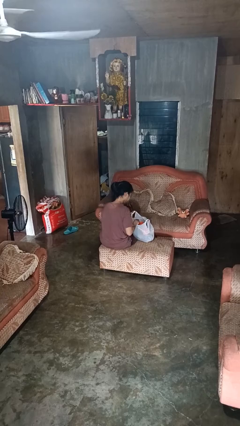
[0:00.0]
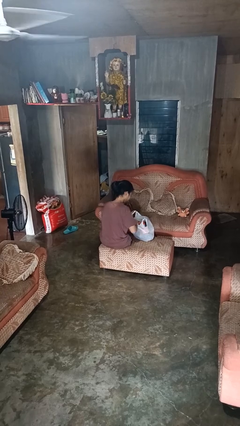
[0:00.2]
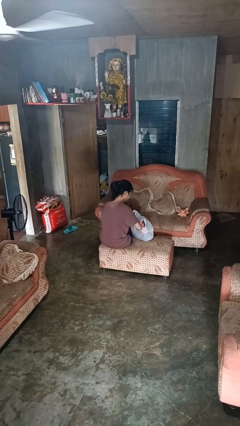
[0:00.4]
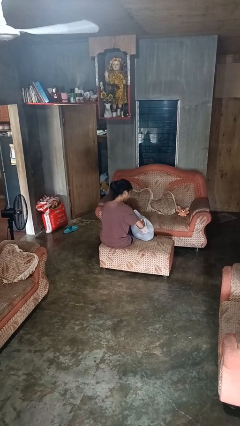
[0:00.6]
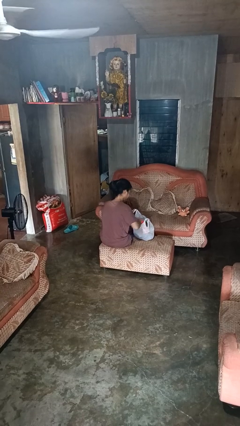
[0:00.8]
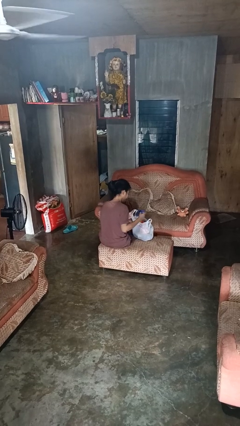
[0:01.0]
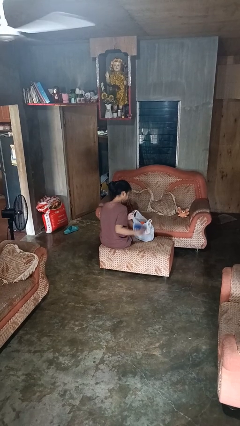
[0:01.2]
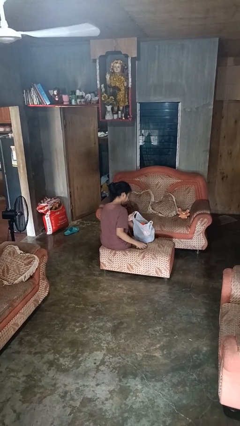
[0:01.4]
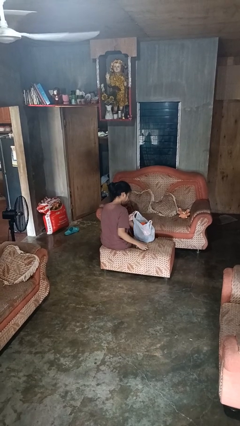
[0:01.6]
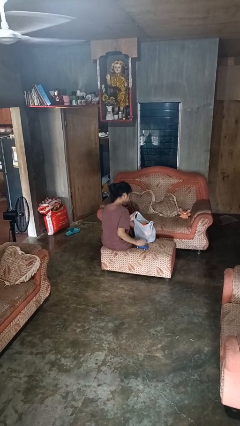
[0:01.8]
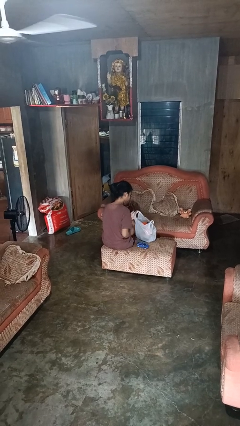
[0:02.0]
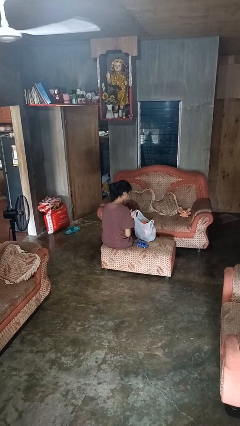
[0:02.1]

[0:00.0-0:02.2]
person takes object from bag

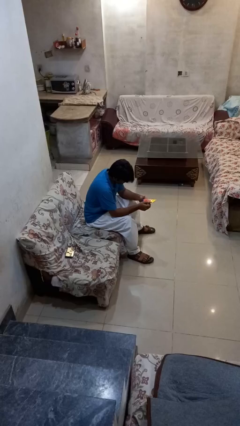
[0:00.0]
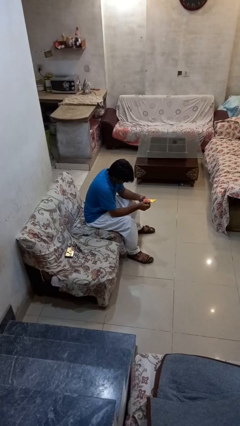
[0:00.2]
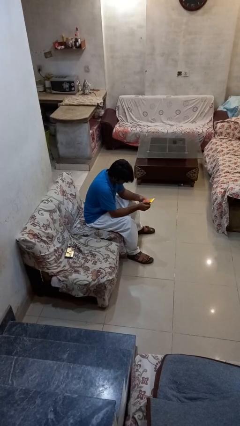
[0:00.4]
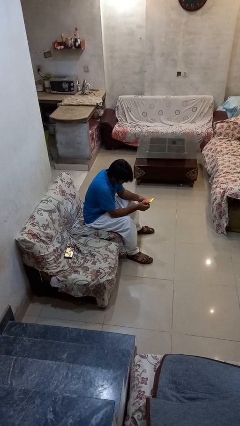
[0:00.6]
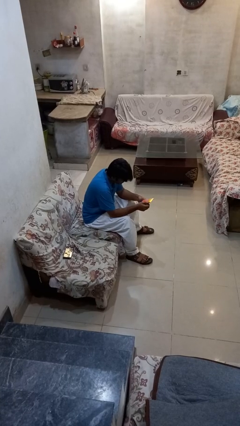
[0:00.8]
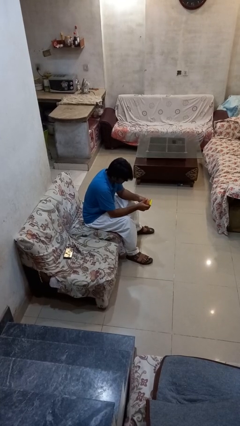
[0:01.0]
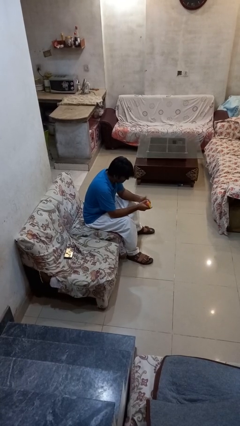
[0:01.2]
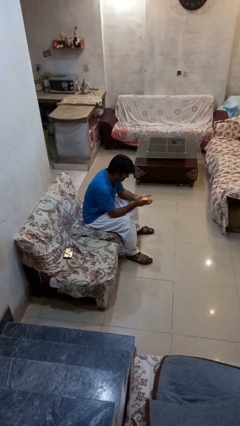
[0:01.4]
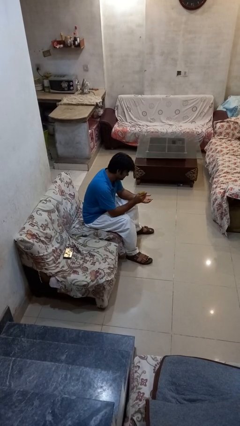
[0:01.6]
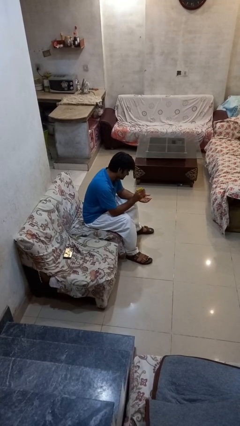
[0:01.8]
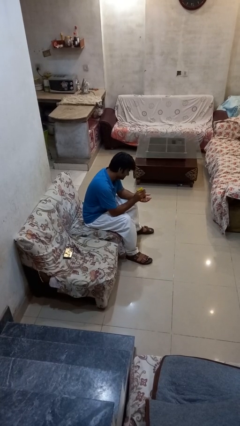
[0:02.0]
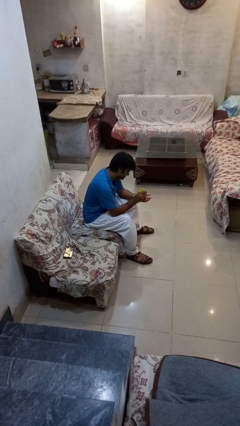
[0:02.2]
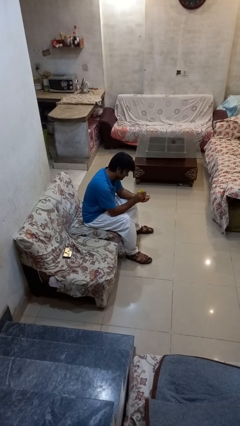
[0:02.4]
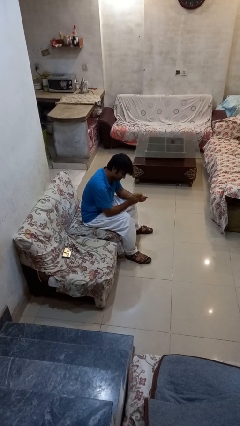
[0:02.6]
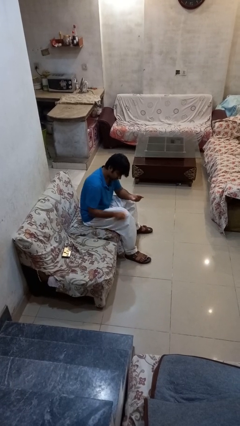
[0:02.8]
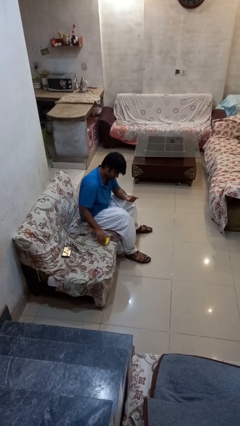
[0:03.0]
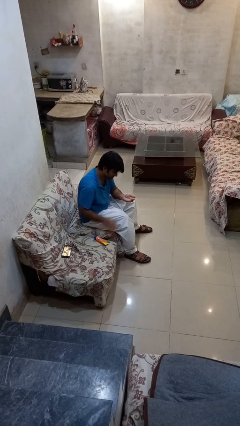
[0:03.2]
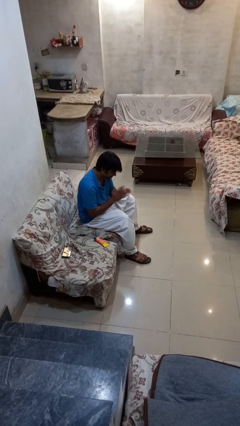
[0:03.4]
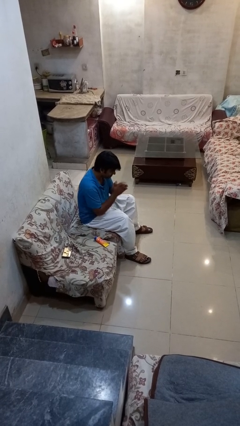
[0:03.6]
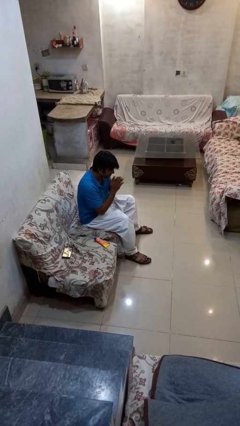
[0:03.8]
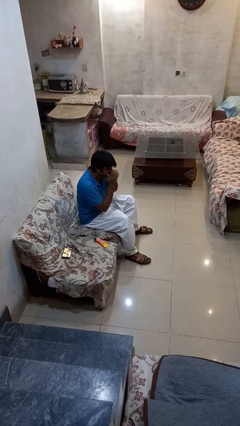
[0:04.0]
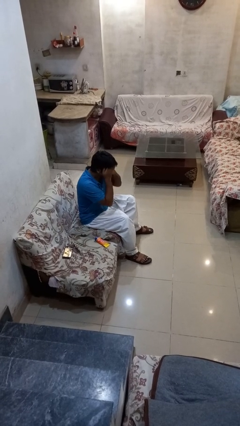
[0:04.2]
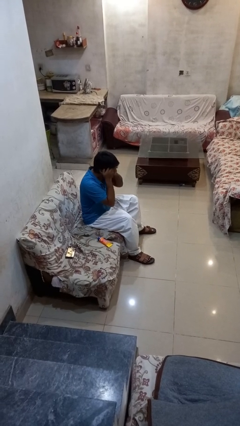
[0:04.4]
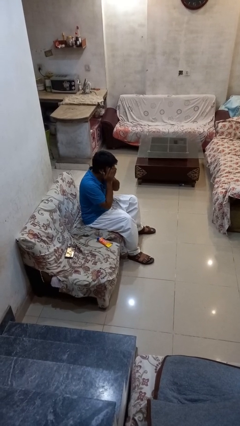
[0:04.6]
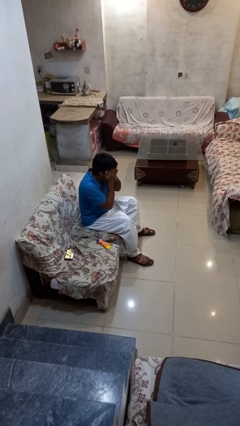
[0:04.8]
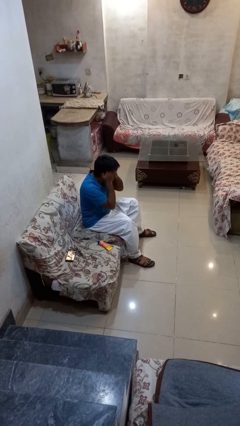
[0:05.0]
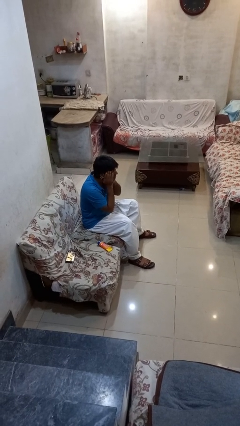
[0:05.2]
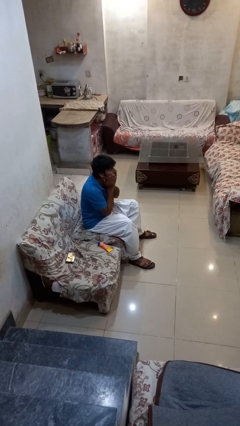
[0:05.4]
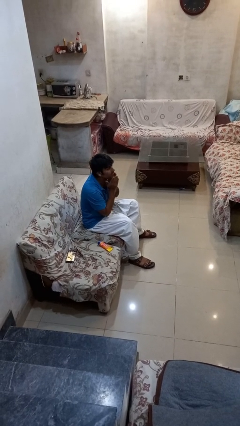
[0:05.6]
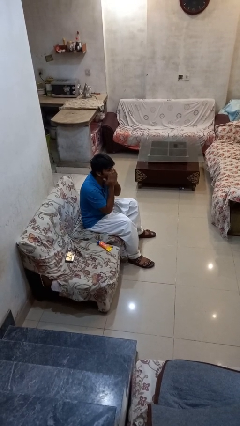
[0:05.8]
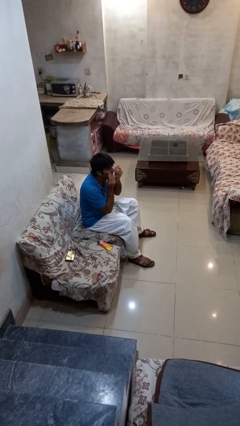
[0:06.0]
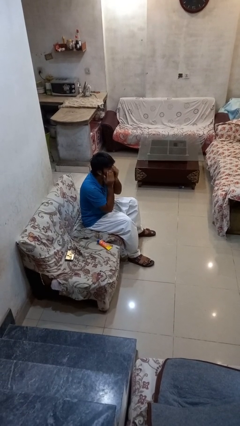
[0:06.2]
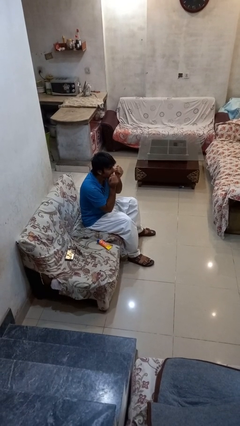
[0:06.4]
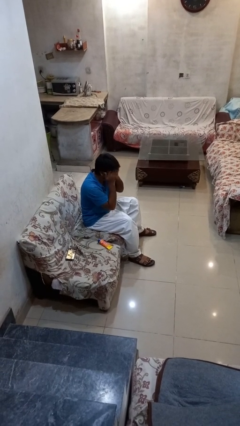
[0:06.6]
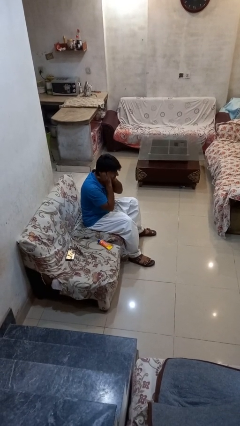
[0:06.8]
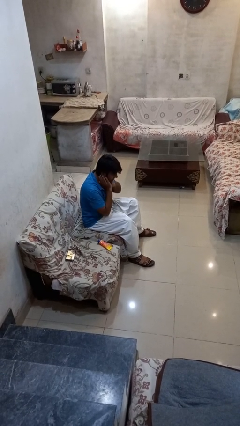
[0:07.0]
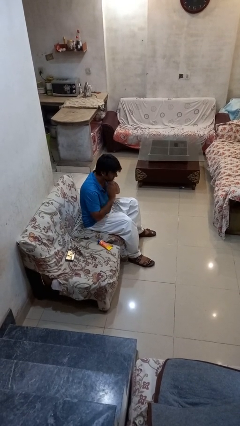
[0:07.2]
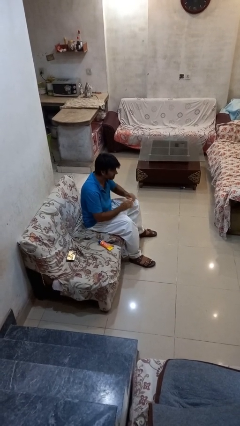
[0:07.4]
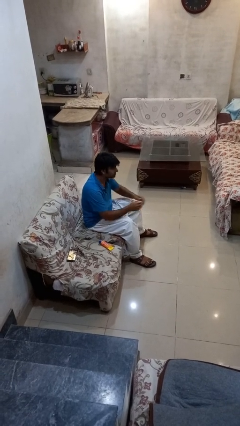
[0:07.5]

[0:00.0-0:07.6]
person applies facial moisturizer

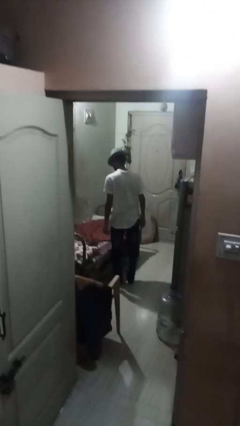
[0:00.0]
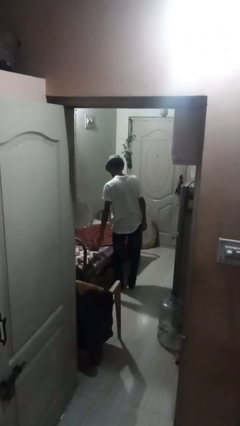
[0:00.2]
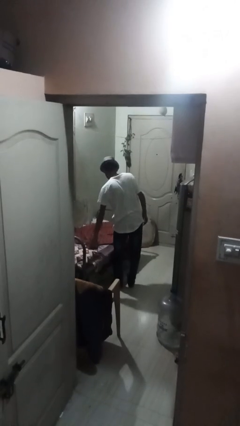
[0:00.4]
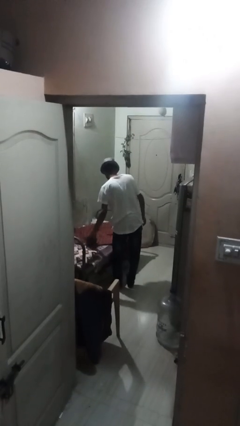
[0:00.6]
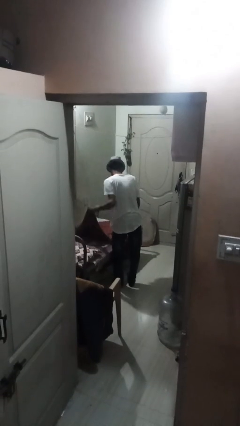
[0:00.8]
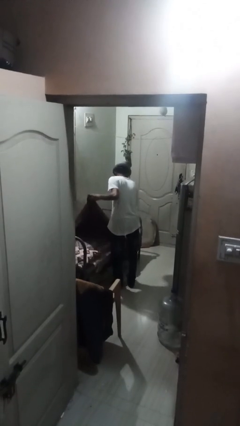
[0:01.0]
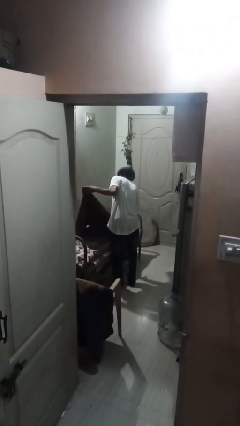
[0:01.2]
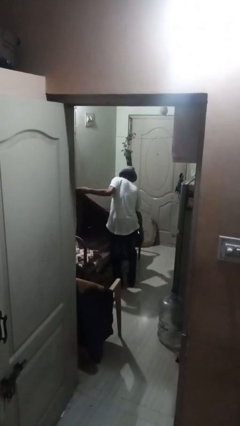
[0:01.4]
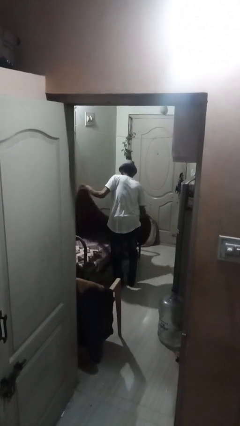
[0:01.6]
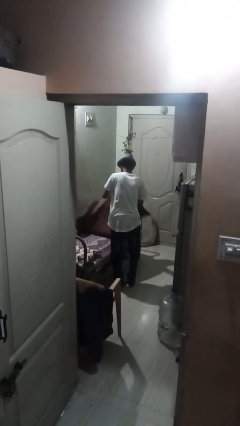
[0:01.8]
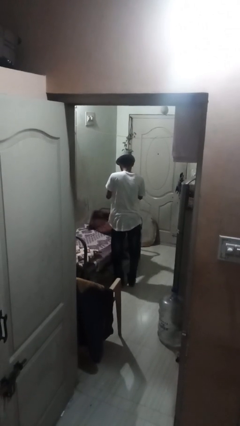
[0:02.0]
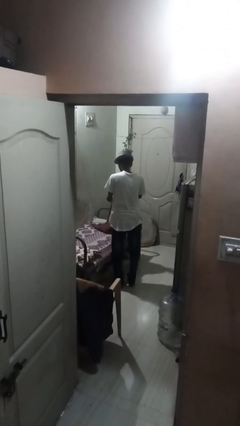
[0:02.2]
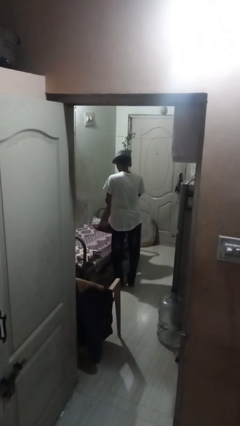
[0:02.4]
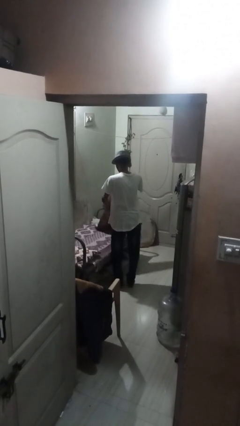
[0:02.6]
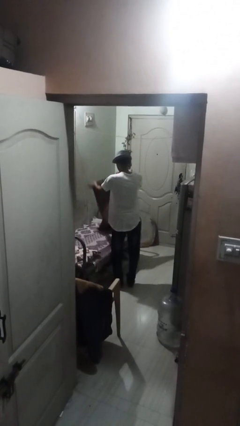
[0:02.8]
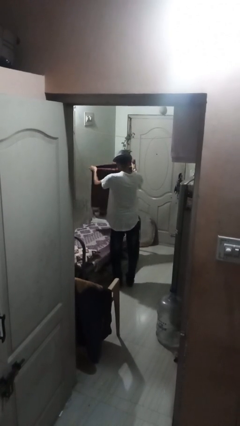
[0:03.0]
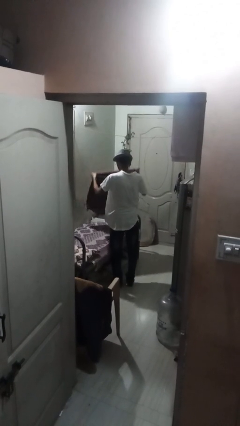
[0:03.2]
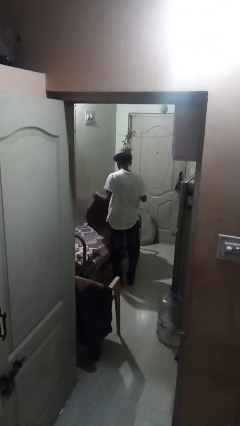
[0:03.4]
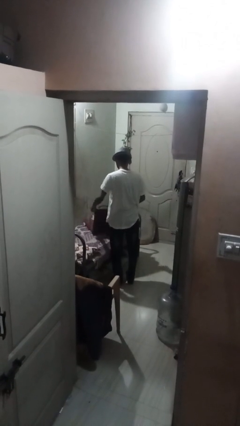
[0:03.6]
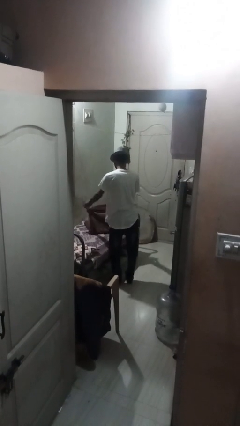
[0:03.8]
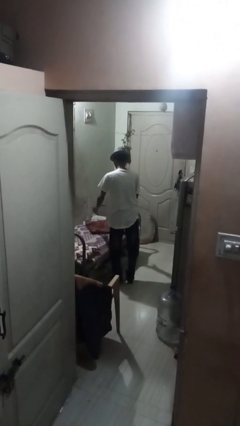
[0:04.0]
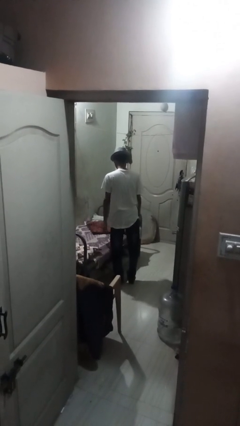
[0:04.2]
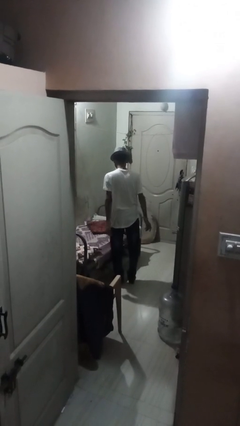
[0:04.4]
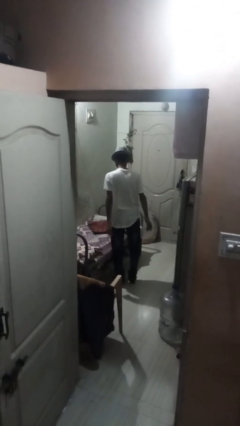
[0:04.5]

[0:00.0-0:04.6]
person folds blanket

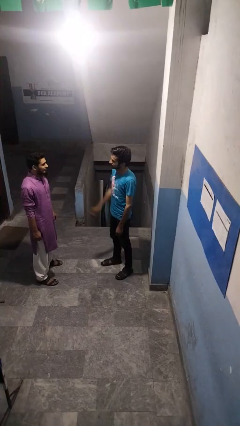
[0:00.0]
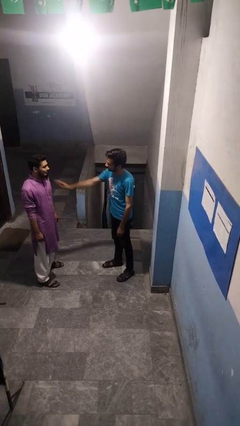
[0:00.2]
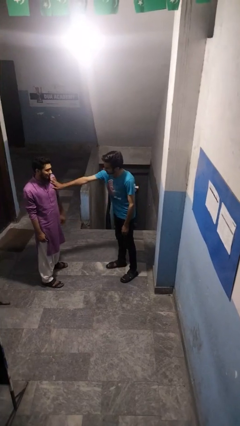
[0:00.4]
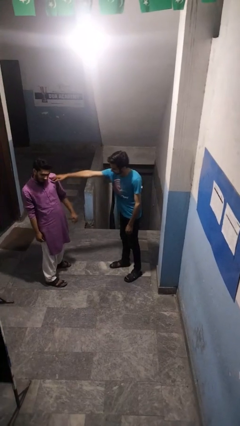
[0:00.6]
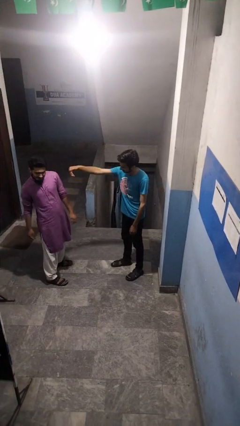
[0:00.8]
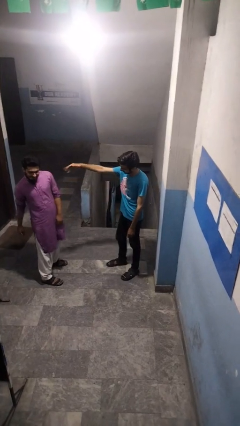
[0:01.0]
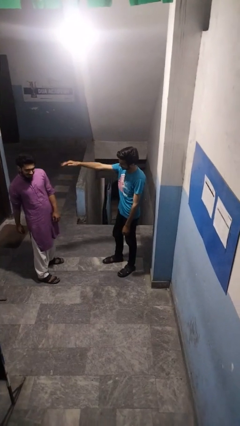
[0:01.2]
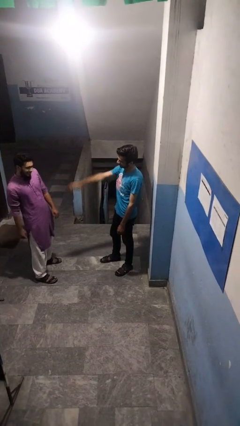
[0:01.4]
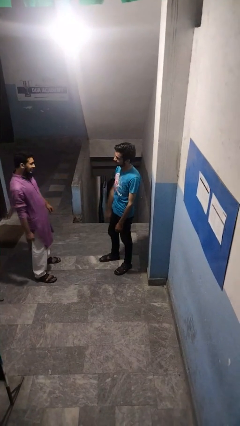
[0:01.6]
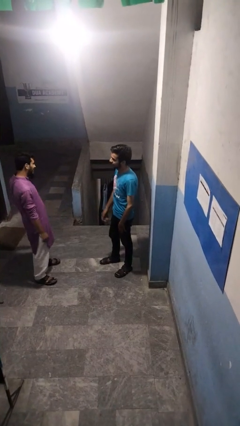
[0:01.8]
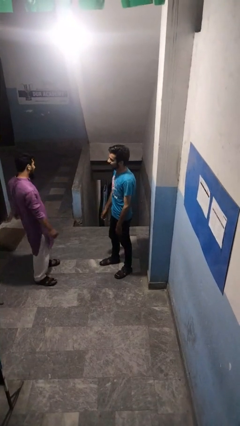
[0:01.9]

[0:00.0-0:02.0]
person shoves person

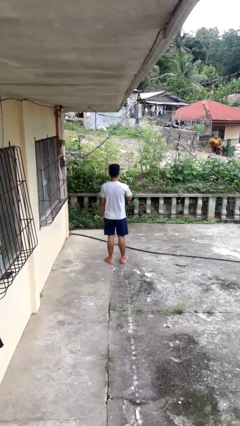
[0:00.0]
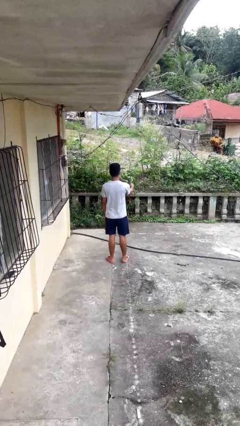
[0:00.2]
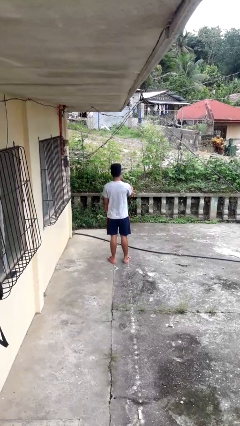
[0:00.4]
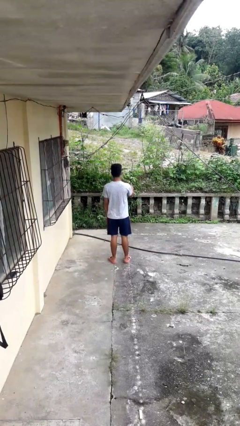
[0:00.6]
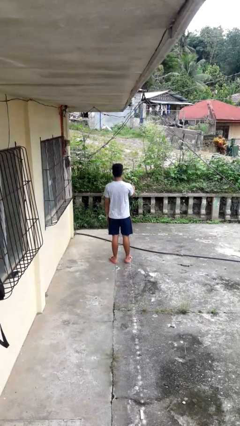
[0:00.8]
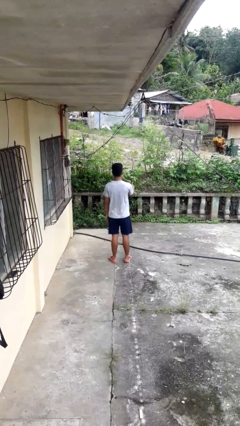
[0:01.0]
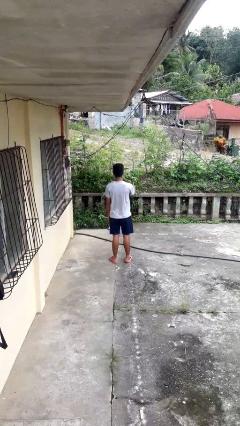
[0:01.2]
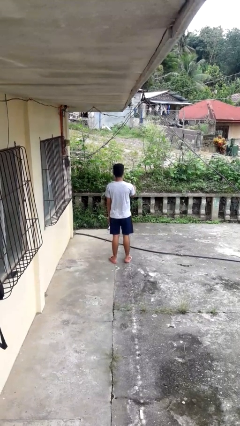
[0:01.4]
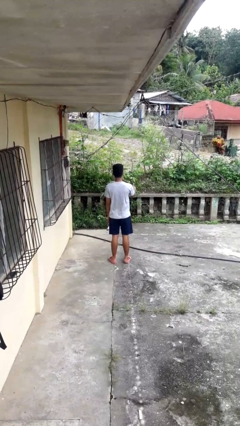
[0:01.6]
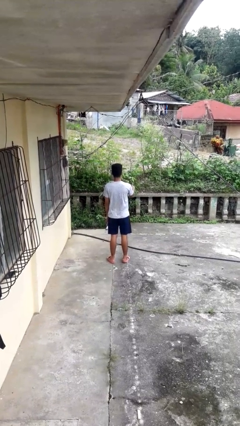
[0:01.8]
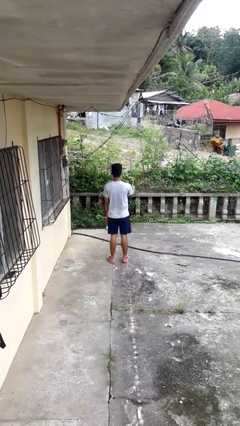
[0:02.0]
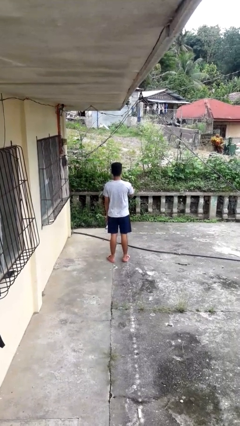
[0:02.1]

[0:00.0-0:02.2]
person gestures thumbs up
